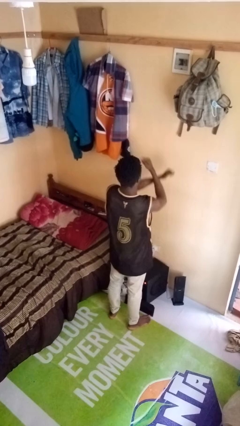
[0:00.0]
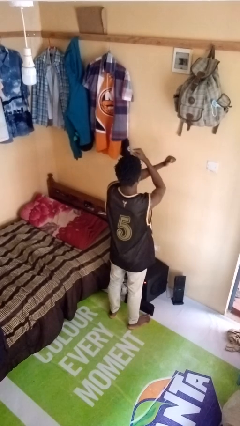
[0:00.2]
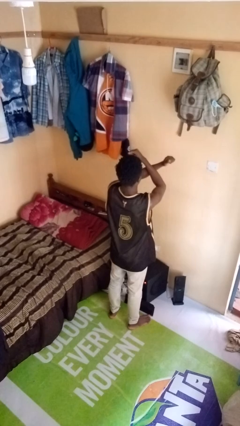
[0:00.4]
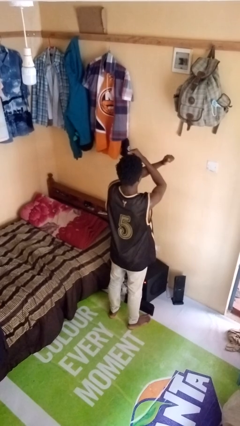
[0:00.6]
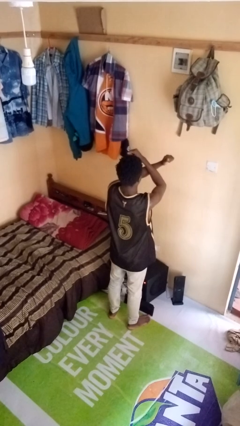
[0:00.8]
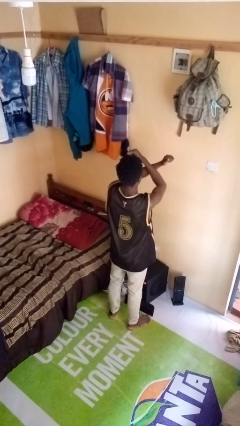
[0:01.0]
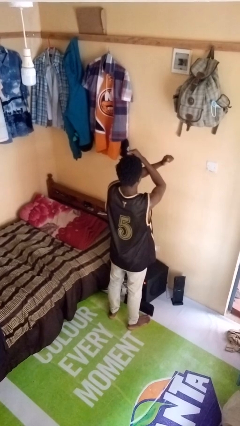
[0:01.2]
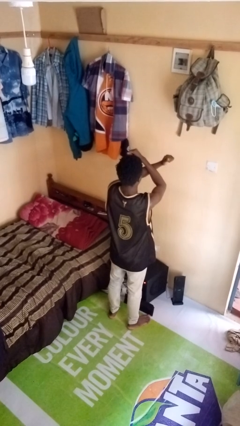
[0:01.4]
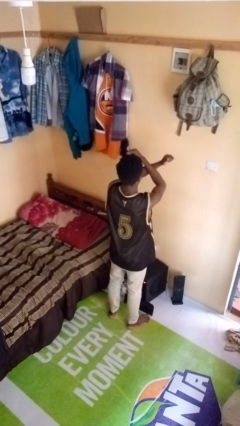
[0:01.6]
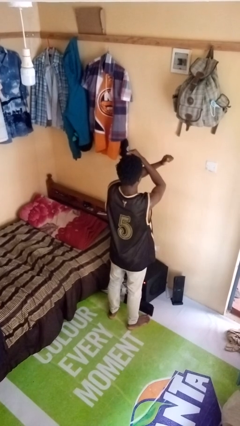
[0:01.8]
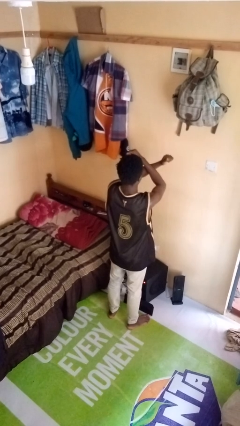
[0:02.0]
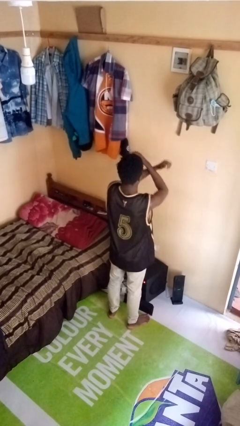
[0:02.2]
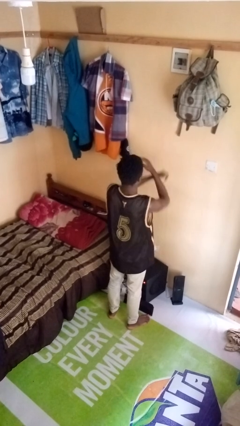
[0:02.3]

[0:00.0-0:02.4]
person gestures arms x

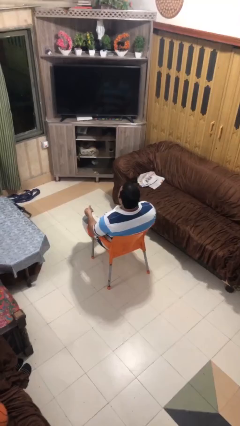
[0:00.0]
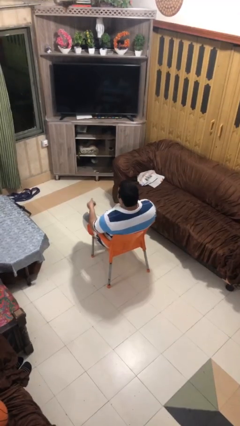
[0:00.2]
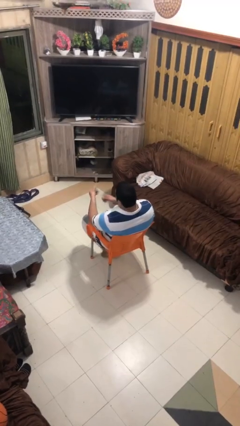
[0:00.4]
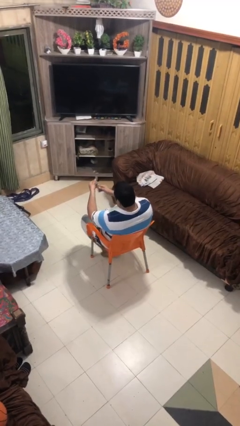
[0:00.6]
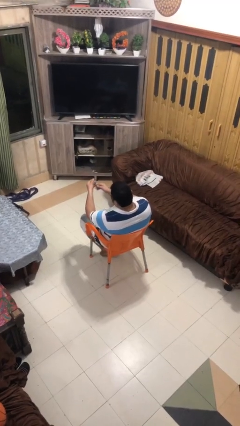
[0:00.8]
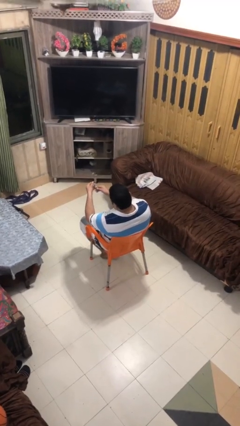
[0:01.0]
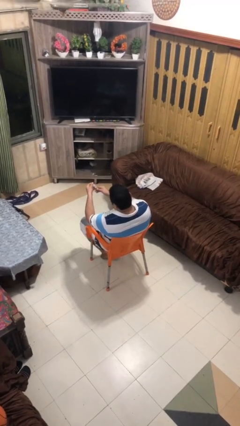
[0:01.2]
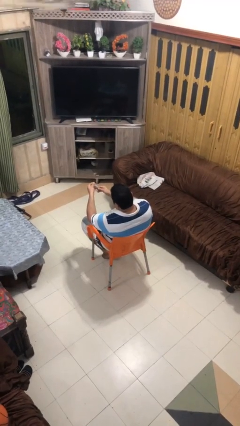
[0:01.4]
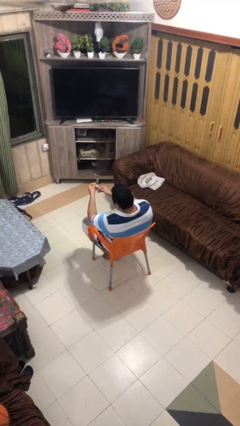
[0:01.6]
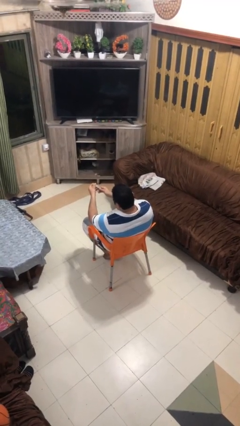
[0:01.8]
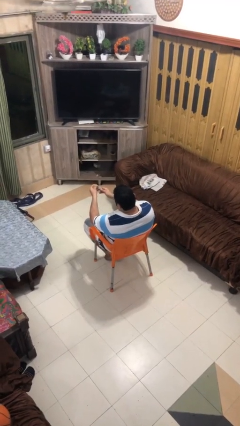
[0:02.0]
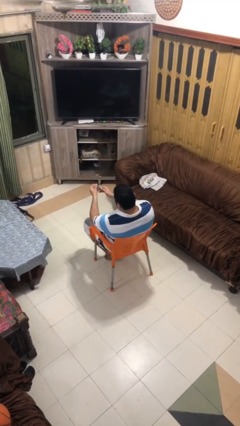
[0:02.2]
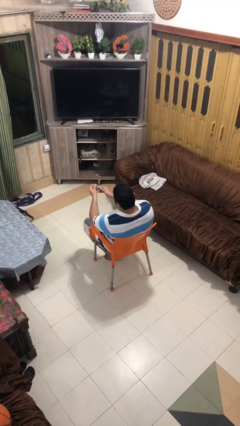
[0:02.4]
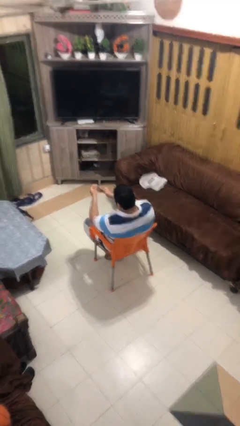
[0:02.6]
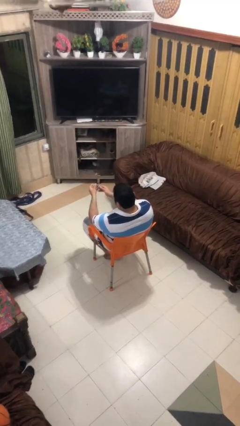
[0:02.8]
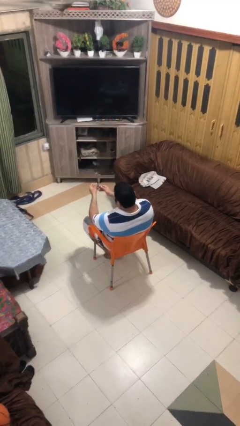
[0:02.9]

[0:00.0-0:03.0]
person clips fingernails

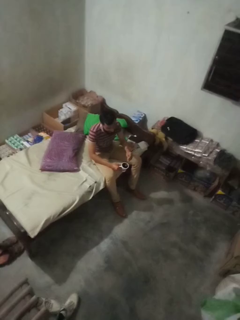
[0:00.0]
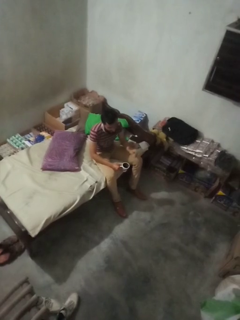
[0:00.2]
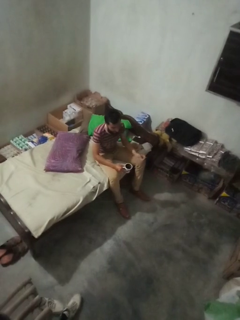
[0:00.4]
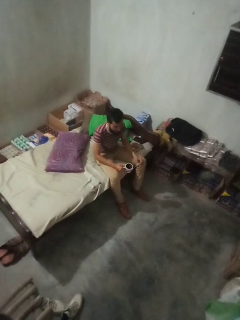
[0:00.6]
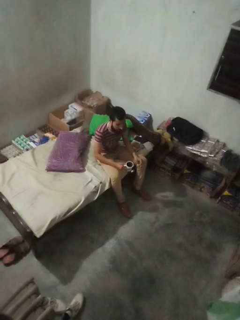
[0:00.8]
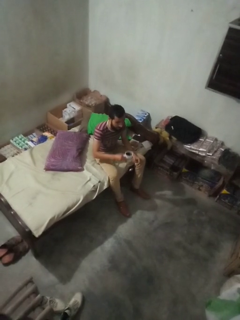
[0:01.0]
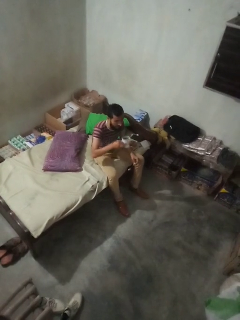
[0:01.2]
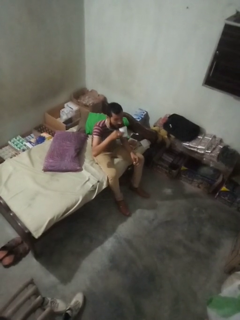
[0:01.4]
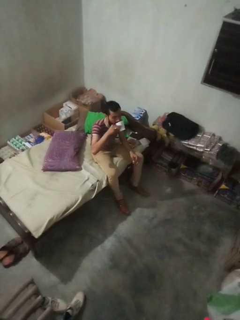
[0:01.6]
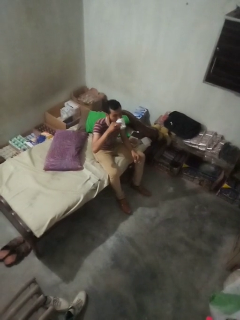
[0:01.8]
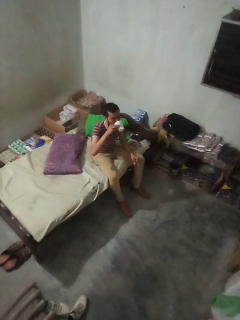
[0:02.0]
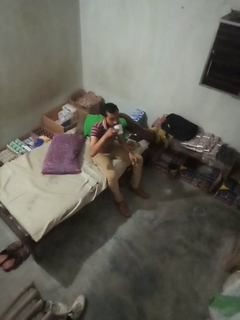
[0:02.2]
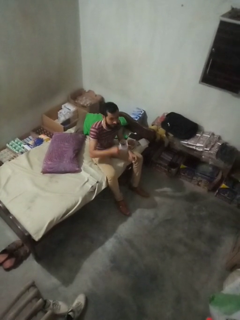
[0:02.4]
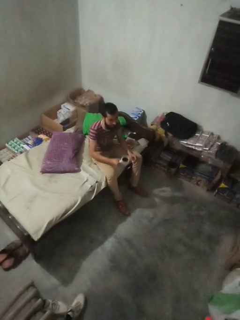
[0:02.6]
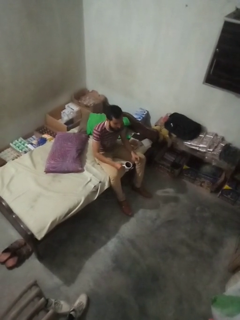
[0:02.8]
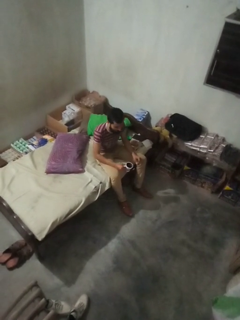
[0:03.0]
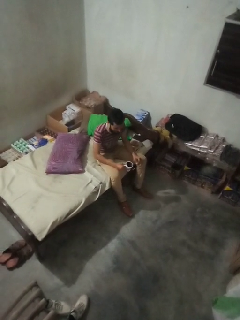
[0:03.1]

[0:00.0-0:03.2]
person drinks from mug

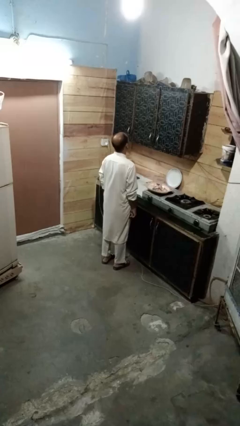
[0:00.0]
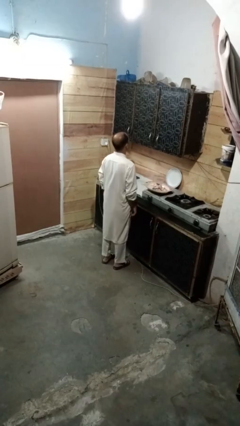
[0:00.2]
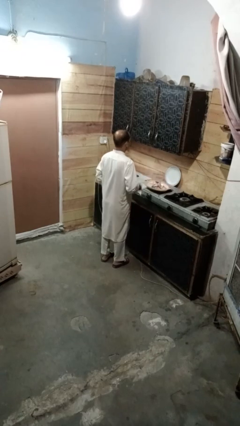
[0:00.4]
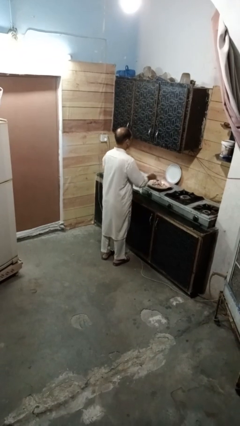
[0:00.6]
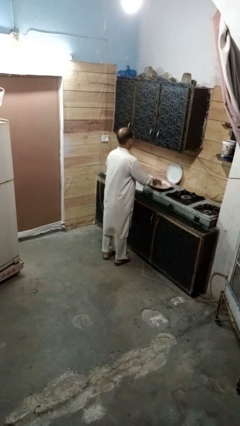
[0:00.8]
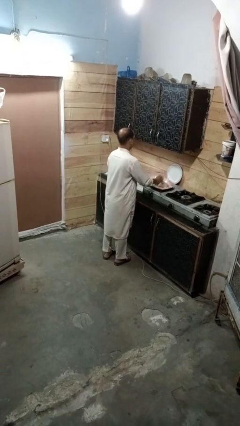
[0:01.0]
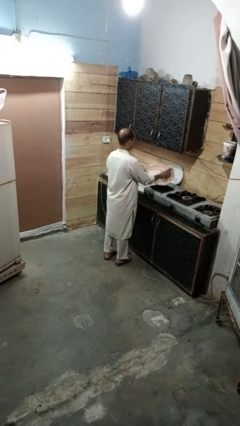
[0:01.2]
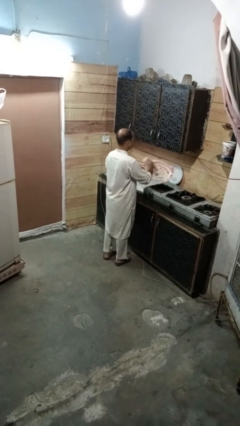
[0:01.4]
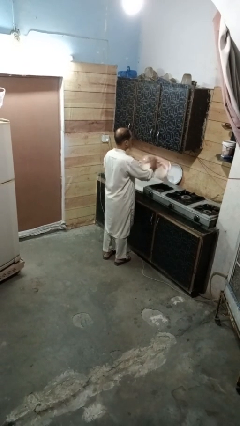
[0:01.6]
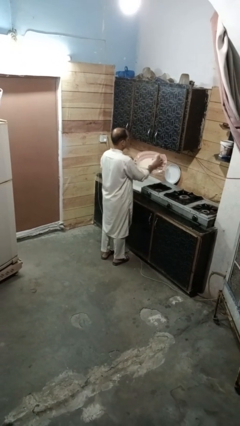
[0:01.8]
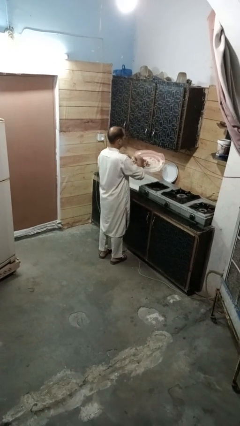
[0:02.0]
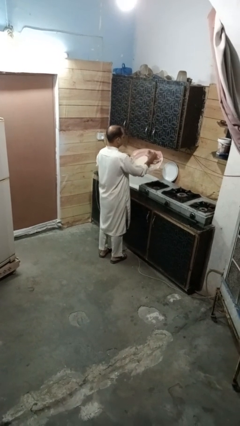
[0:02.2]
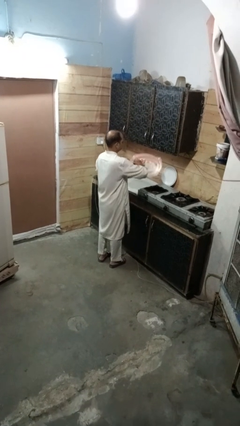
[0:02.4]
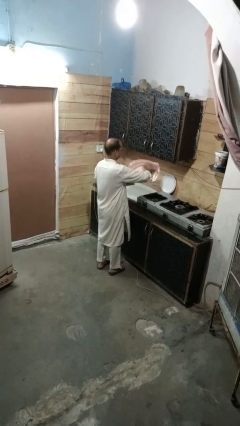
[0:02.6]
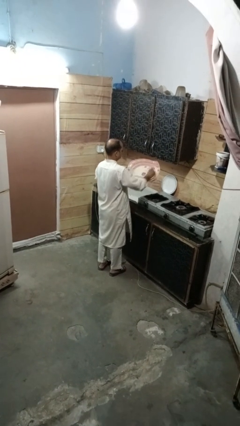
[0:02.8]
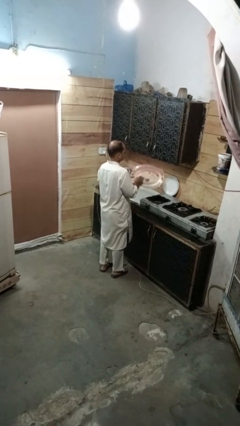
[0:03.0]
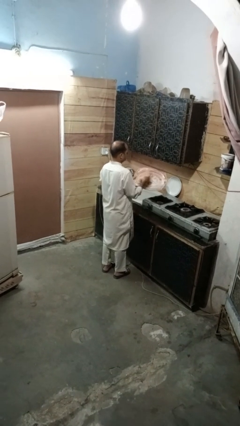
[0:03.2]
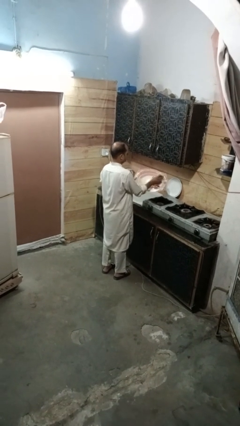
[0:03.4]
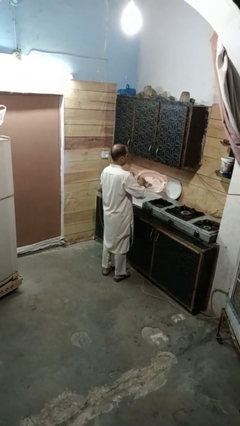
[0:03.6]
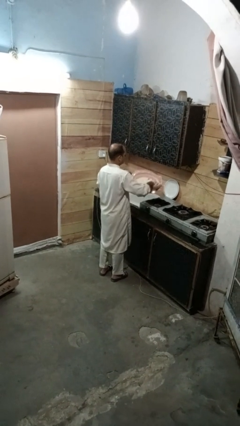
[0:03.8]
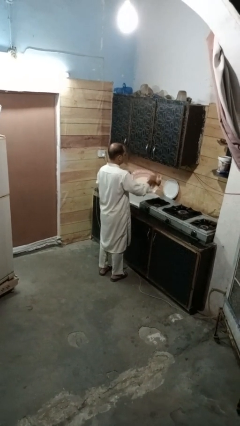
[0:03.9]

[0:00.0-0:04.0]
person dries dish

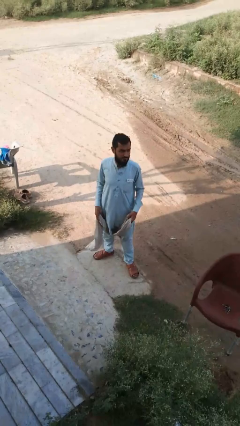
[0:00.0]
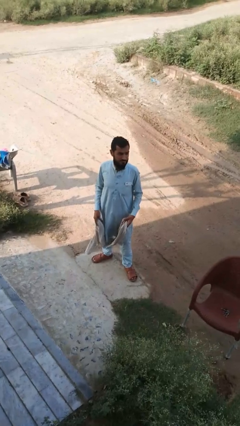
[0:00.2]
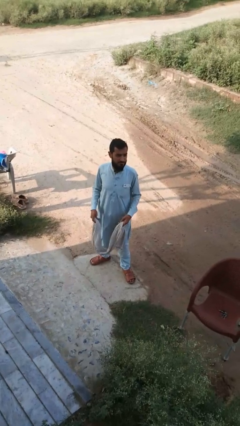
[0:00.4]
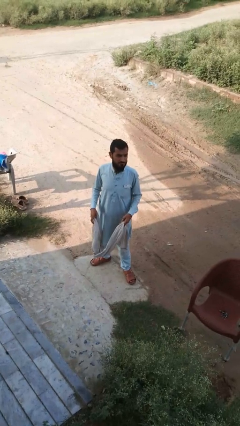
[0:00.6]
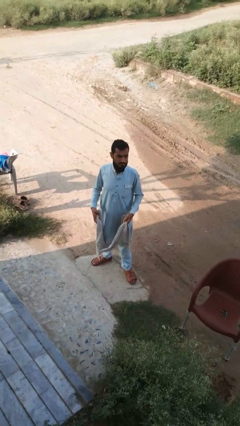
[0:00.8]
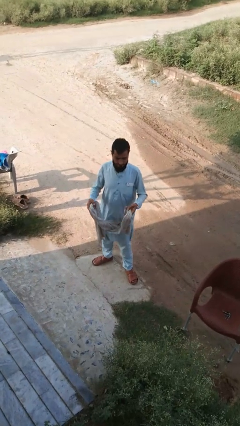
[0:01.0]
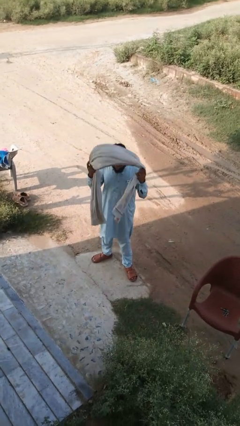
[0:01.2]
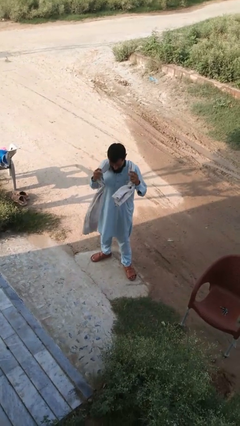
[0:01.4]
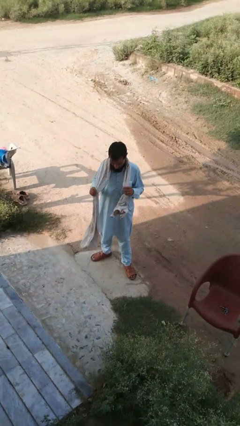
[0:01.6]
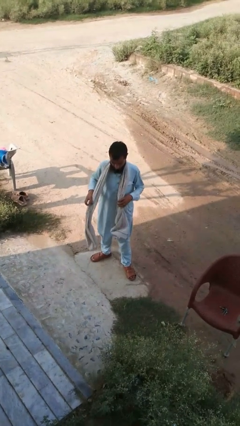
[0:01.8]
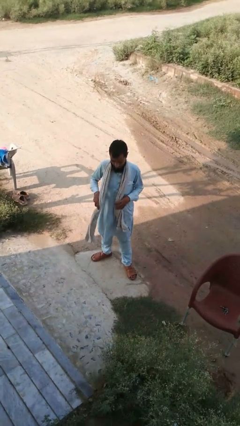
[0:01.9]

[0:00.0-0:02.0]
person puts on scarf

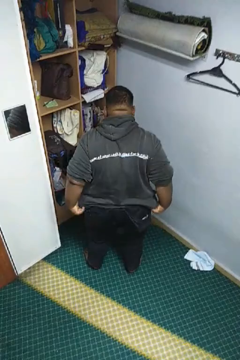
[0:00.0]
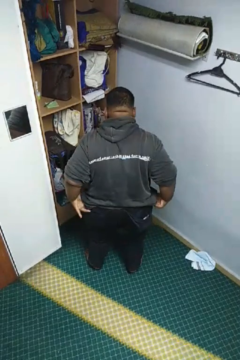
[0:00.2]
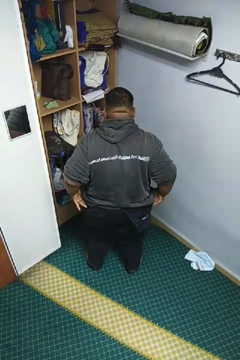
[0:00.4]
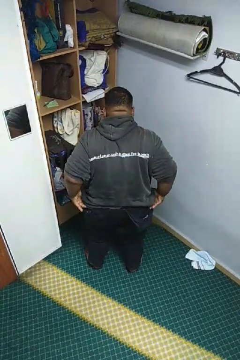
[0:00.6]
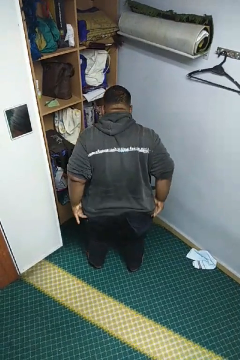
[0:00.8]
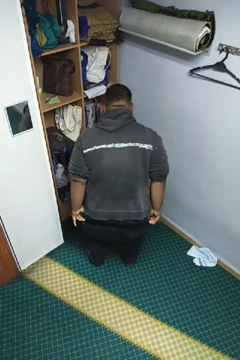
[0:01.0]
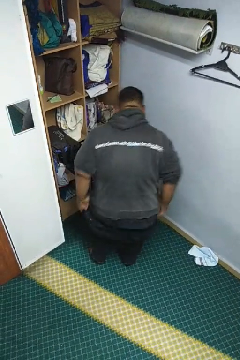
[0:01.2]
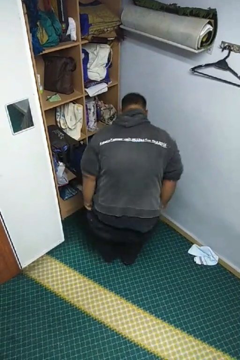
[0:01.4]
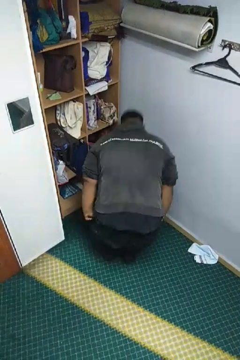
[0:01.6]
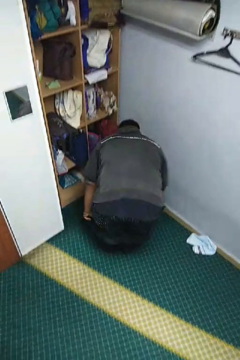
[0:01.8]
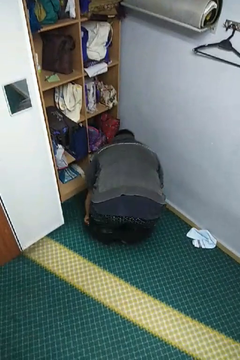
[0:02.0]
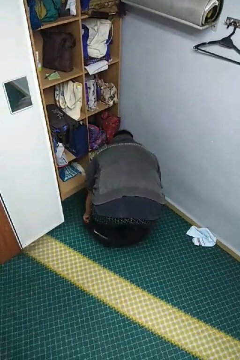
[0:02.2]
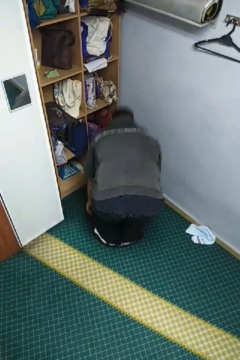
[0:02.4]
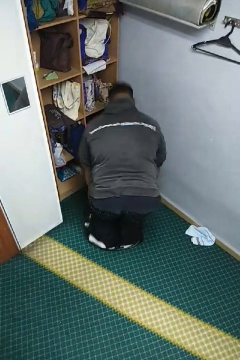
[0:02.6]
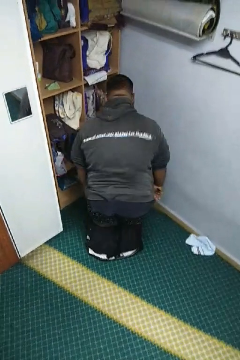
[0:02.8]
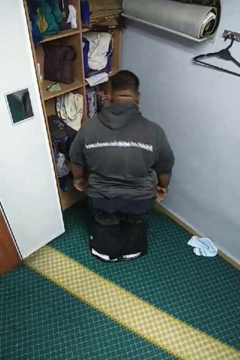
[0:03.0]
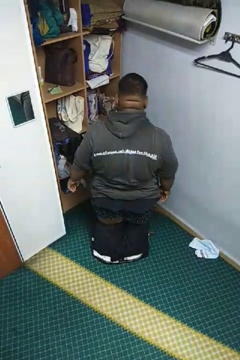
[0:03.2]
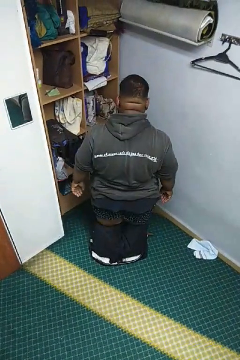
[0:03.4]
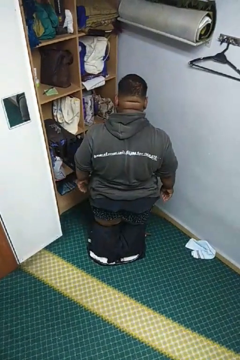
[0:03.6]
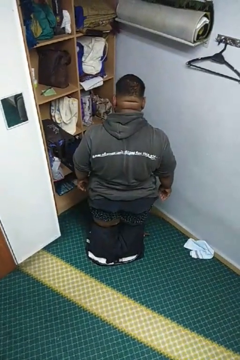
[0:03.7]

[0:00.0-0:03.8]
person takes off pants

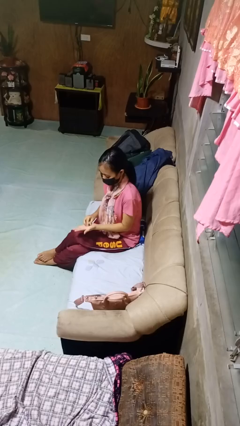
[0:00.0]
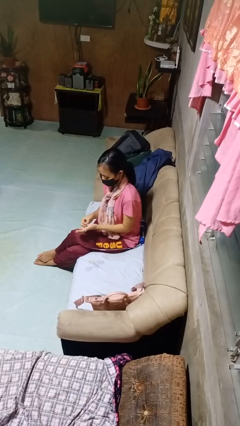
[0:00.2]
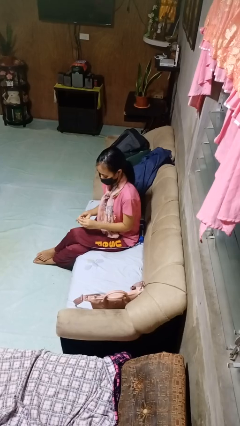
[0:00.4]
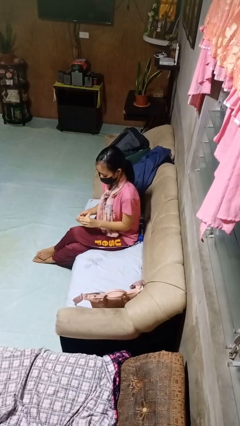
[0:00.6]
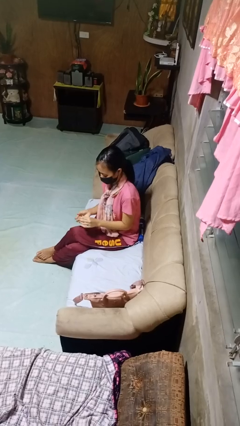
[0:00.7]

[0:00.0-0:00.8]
person puts on ring
